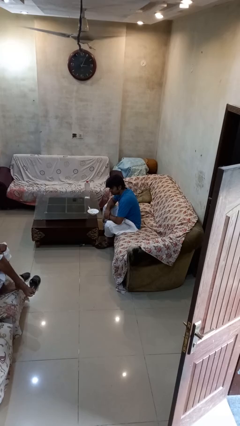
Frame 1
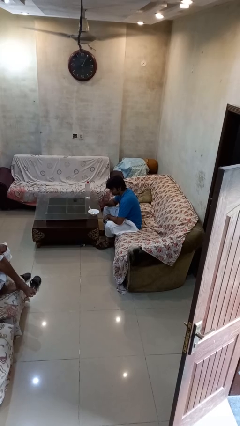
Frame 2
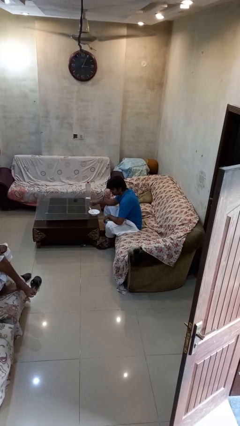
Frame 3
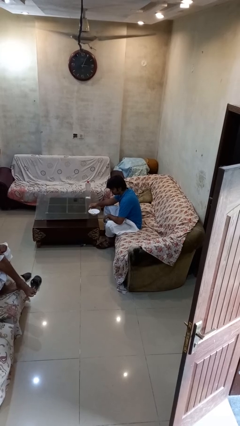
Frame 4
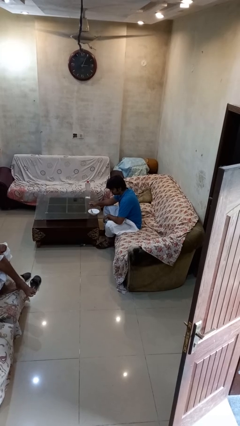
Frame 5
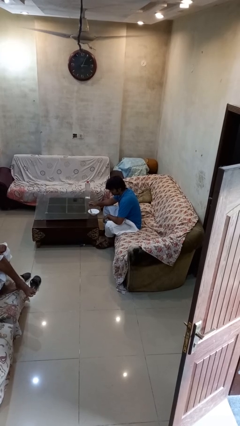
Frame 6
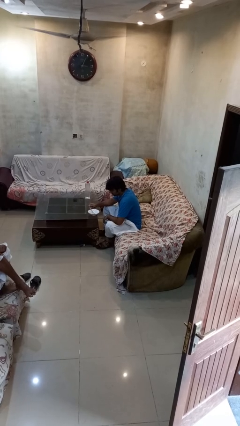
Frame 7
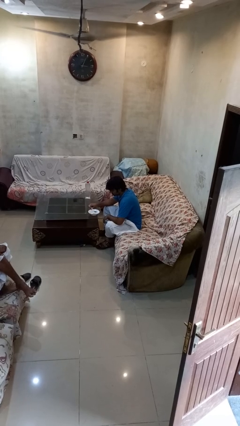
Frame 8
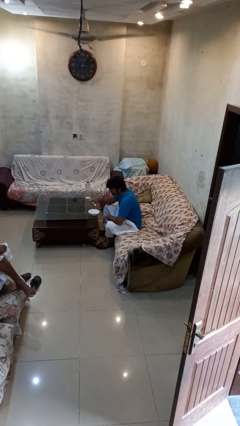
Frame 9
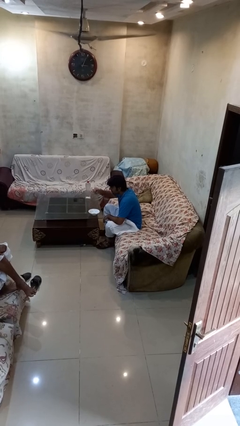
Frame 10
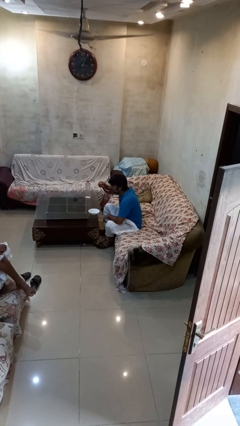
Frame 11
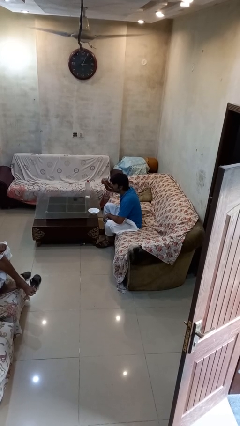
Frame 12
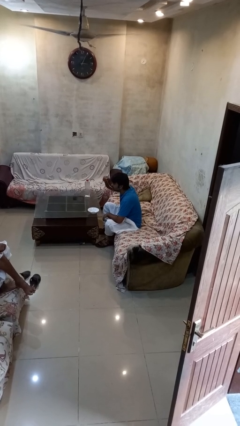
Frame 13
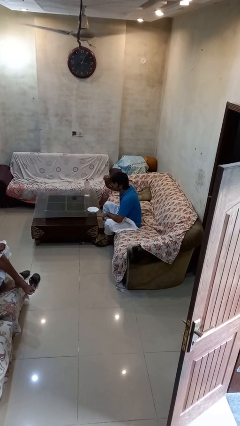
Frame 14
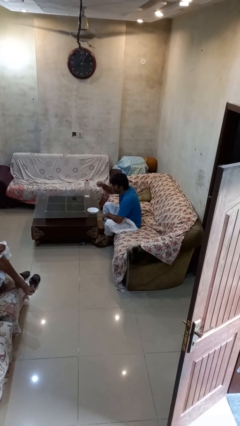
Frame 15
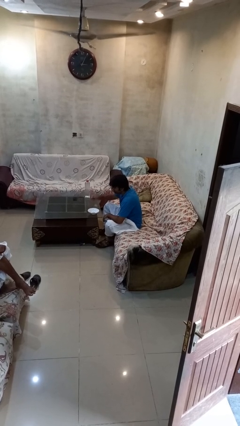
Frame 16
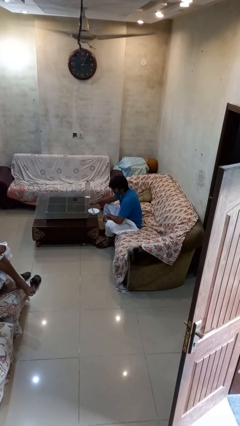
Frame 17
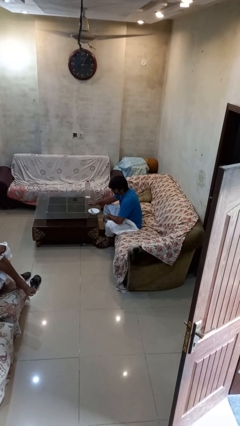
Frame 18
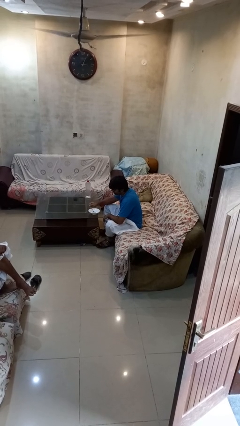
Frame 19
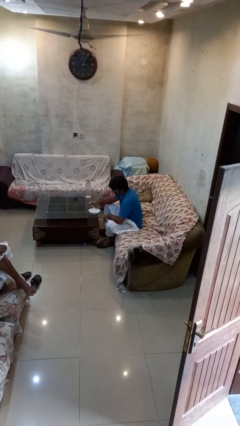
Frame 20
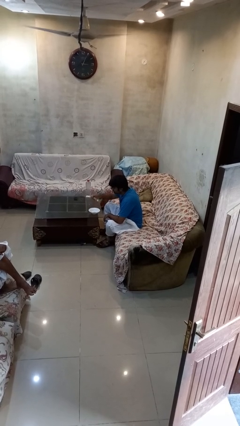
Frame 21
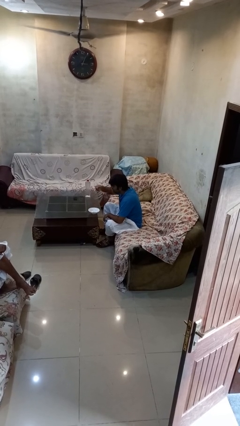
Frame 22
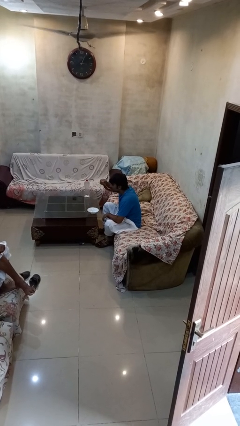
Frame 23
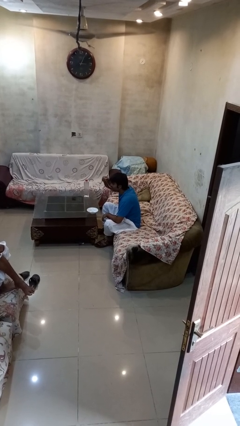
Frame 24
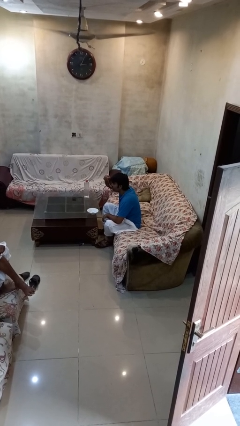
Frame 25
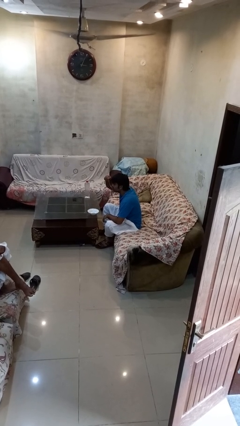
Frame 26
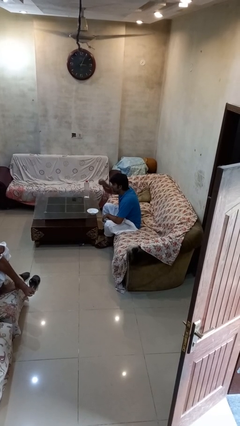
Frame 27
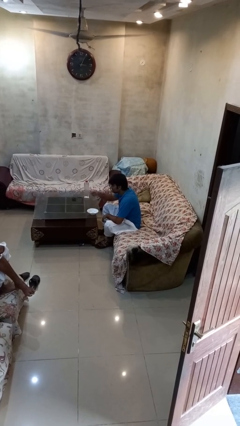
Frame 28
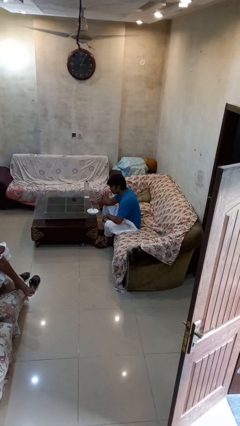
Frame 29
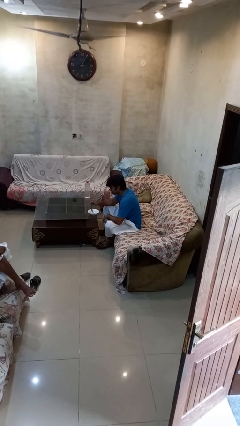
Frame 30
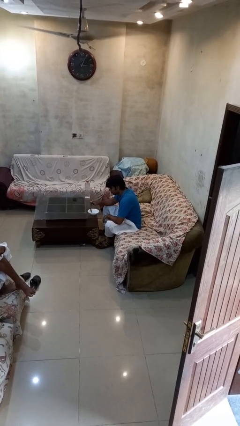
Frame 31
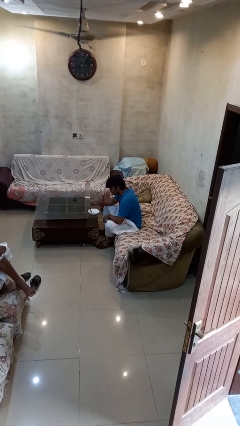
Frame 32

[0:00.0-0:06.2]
person eats with utensil

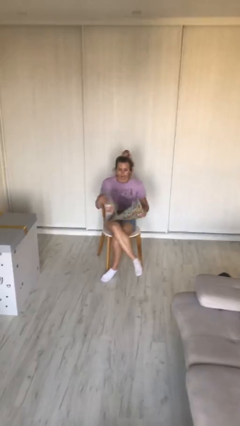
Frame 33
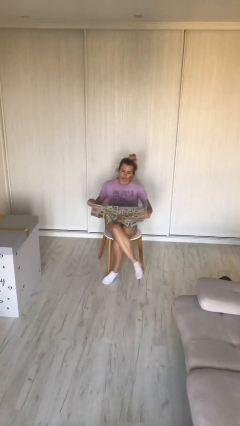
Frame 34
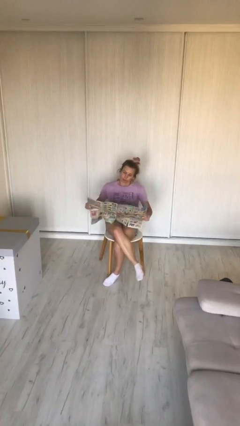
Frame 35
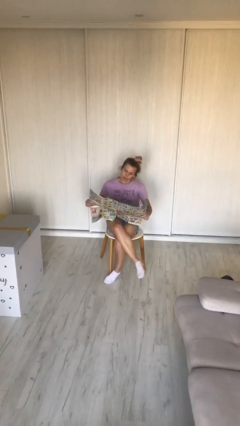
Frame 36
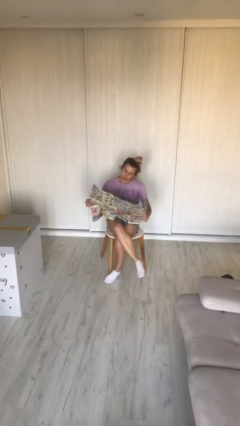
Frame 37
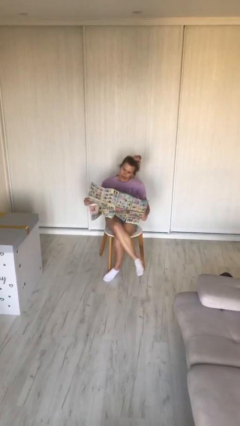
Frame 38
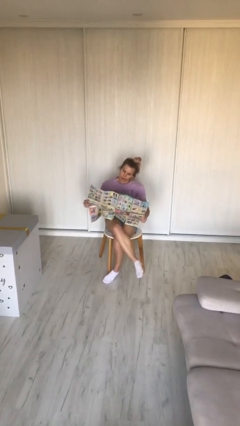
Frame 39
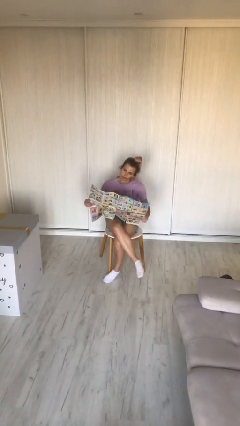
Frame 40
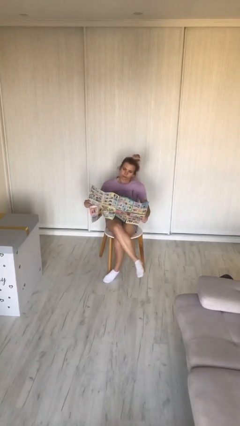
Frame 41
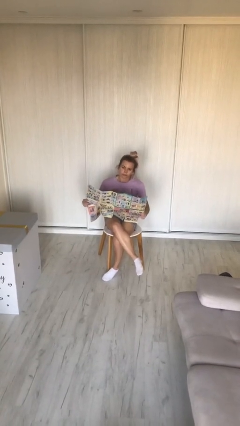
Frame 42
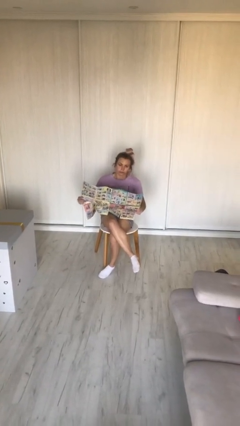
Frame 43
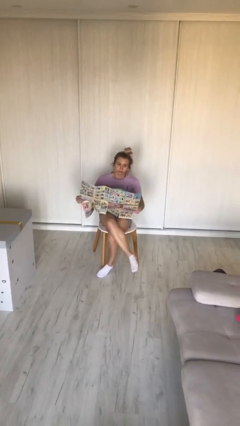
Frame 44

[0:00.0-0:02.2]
person reads newspaper

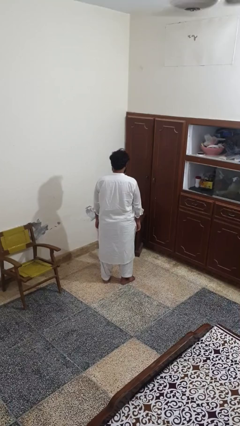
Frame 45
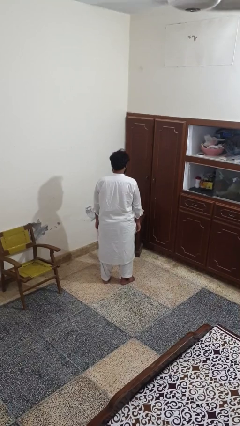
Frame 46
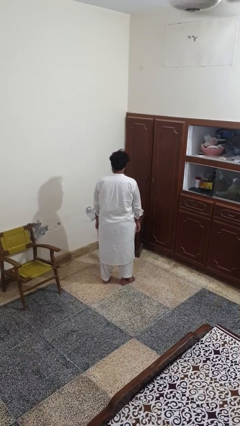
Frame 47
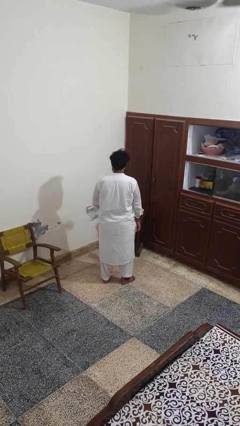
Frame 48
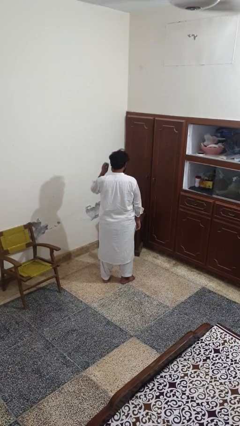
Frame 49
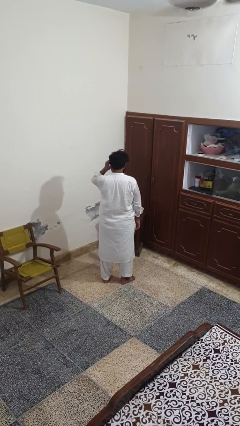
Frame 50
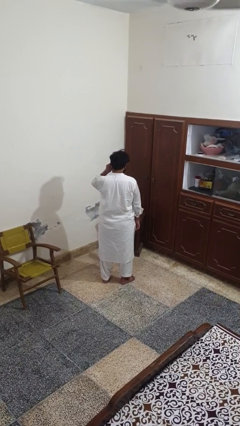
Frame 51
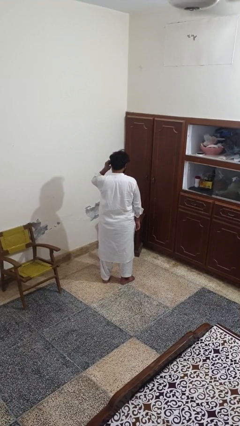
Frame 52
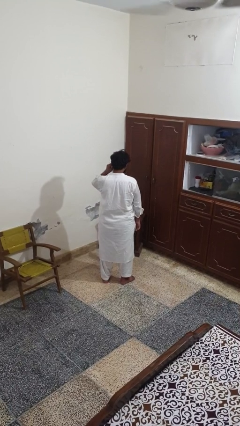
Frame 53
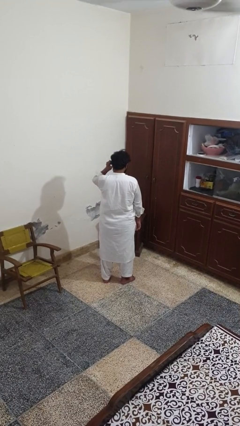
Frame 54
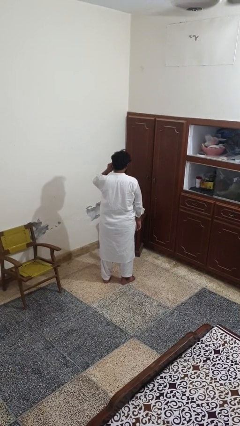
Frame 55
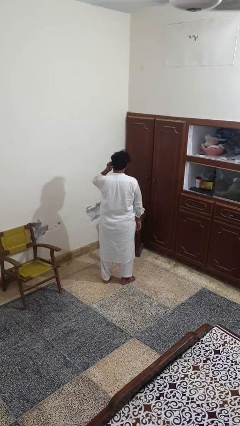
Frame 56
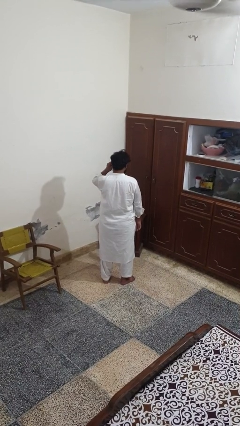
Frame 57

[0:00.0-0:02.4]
person touches earlobe

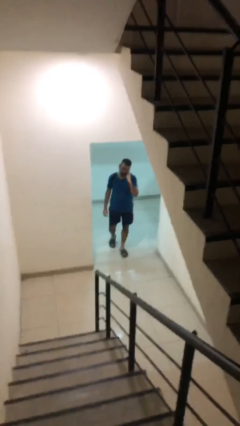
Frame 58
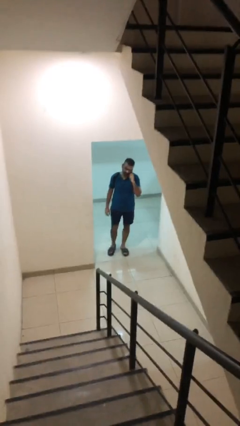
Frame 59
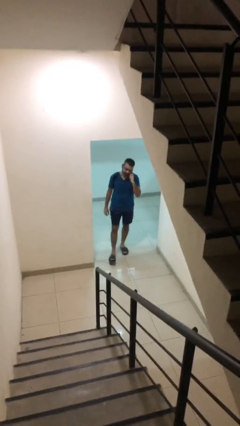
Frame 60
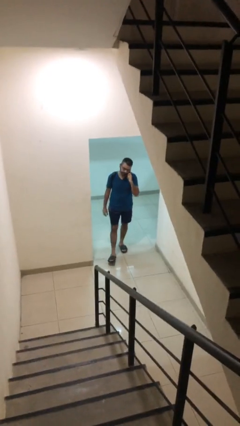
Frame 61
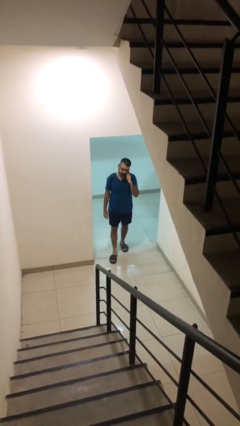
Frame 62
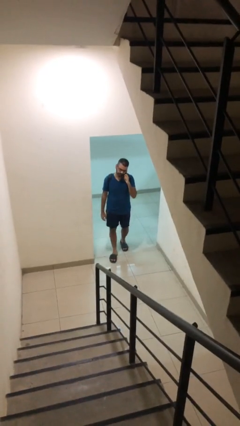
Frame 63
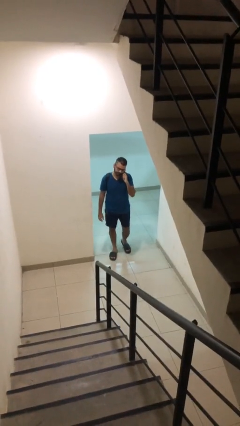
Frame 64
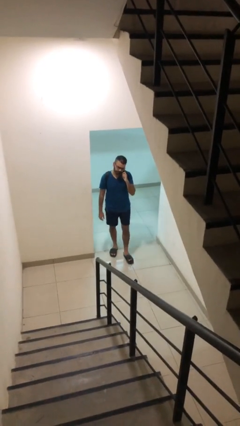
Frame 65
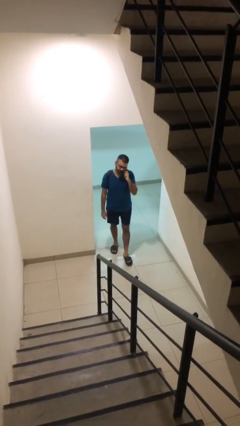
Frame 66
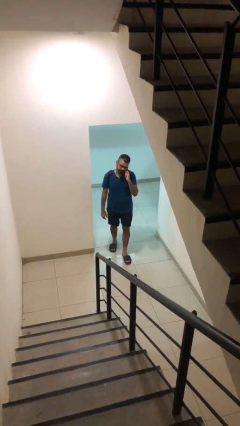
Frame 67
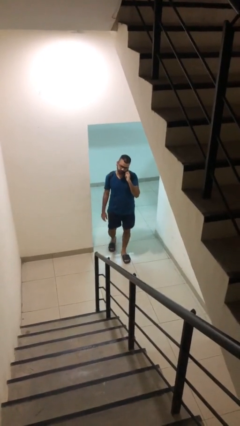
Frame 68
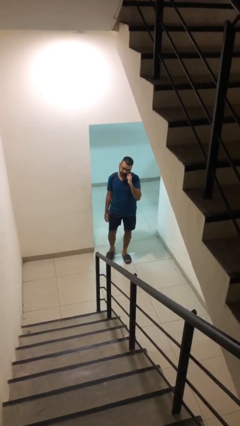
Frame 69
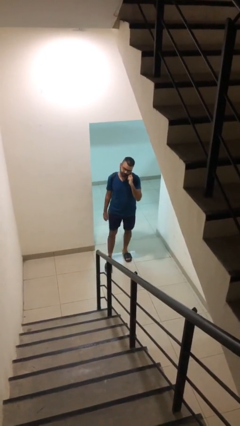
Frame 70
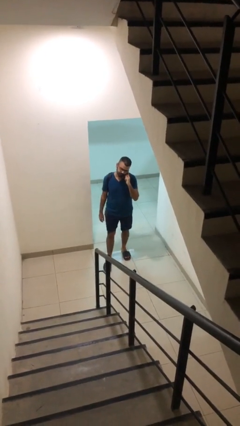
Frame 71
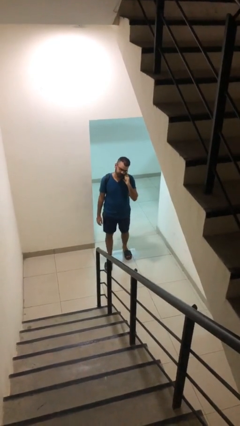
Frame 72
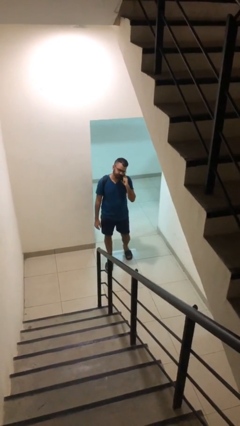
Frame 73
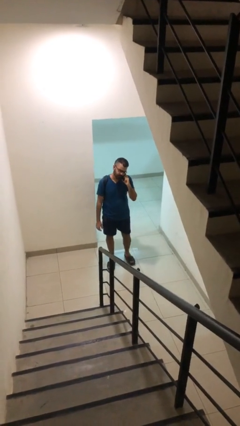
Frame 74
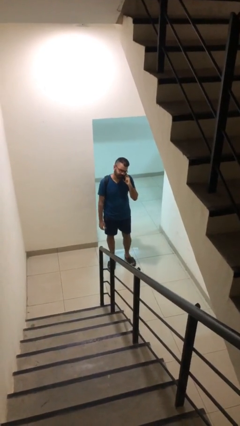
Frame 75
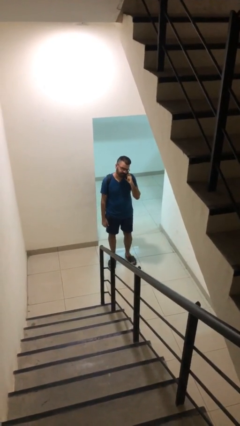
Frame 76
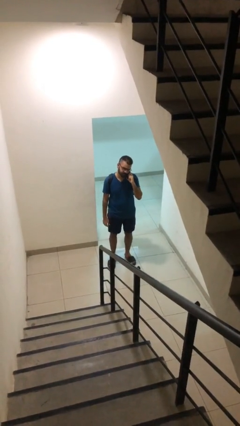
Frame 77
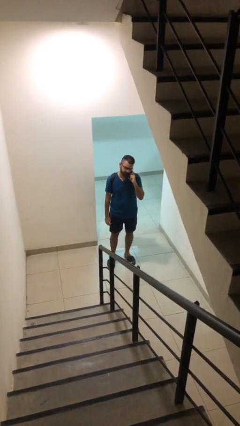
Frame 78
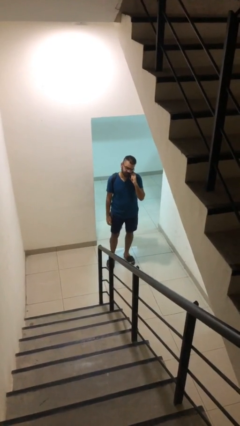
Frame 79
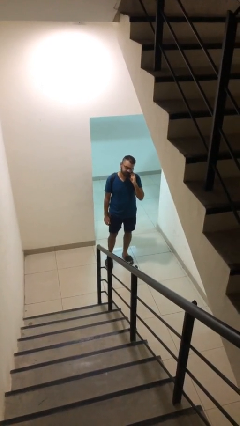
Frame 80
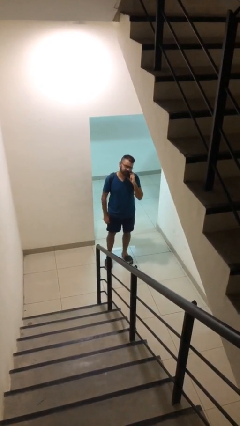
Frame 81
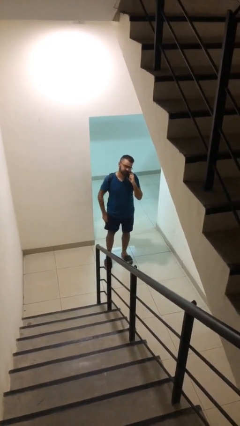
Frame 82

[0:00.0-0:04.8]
person enters scene through structure

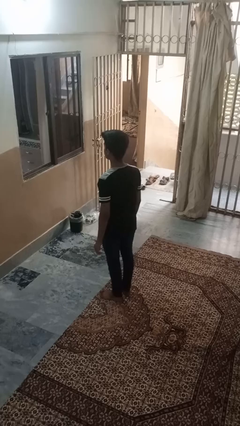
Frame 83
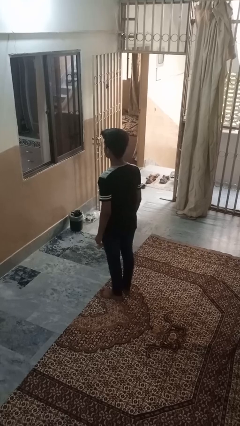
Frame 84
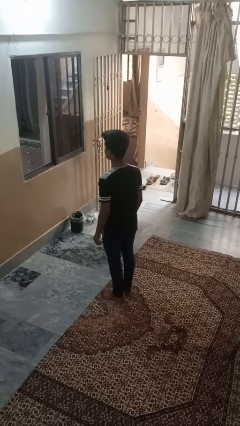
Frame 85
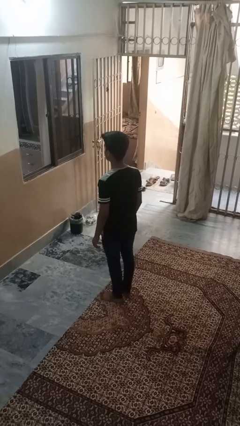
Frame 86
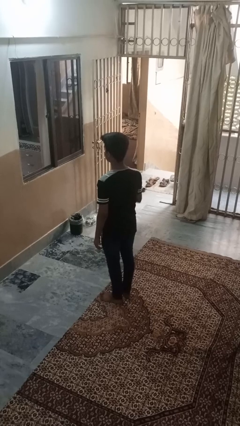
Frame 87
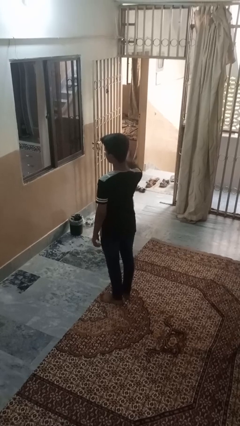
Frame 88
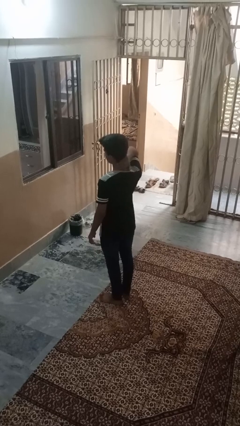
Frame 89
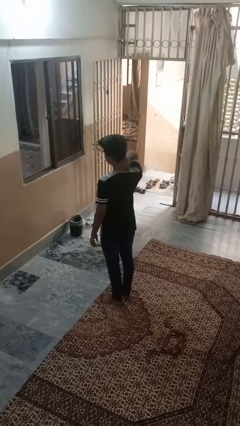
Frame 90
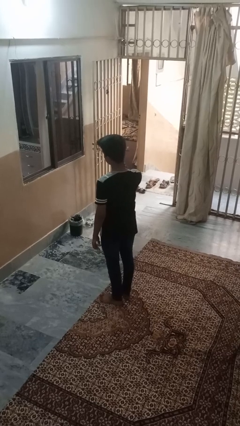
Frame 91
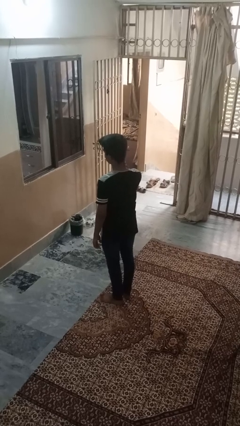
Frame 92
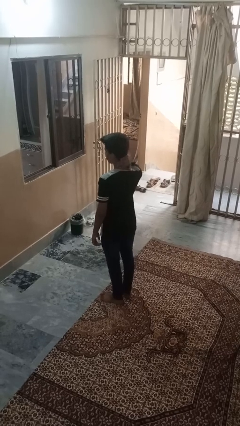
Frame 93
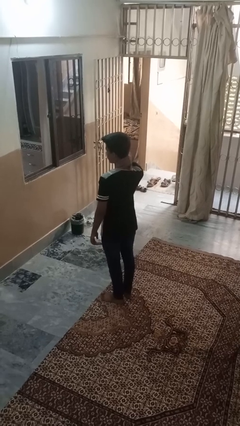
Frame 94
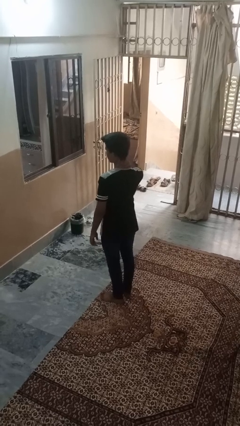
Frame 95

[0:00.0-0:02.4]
person rubs neck
